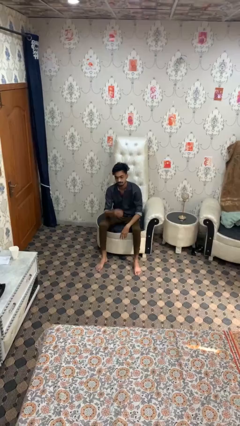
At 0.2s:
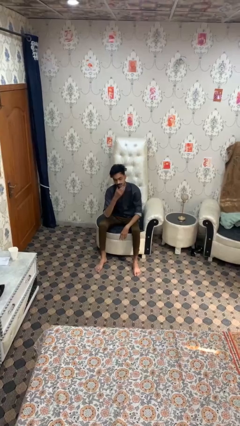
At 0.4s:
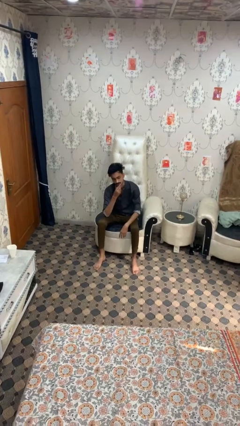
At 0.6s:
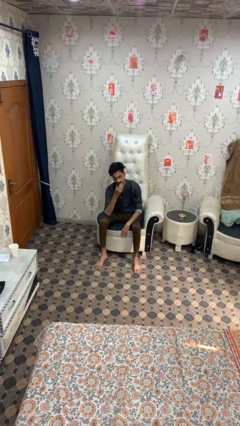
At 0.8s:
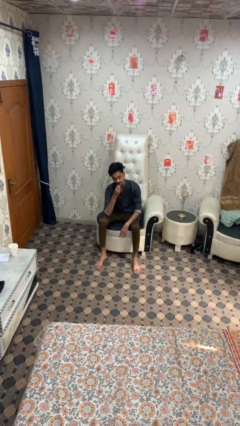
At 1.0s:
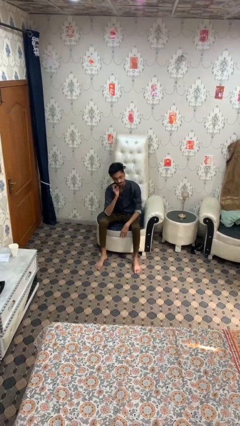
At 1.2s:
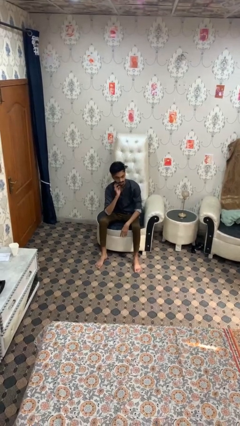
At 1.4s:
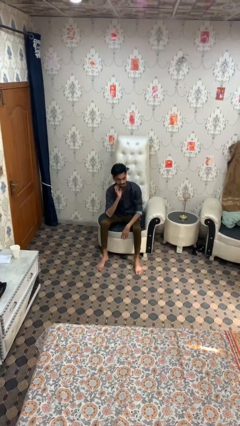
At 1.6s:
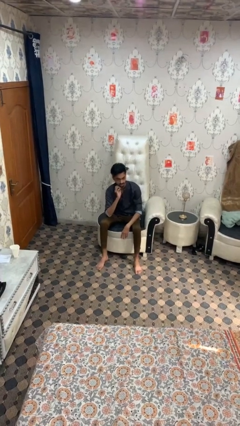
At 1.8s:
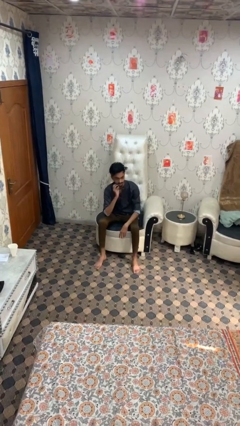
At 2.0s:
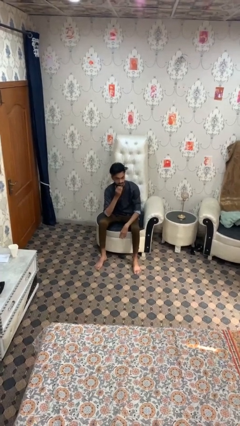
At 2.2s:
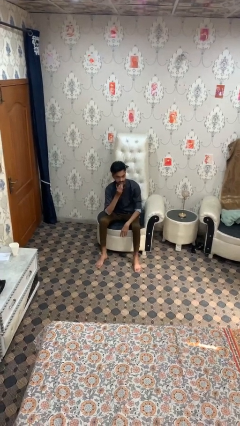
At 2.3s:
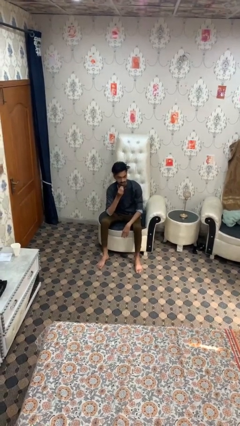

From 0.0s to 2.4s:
person strokes chin

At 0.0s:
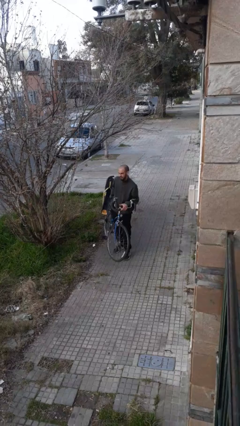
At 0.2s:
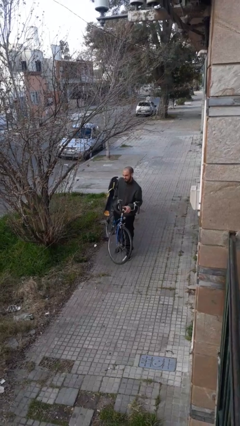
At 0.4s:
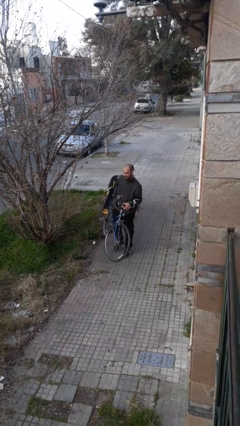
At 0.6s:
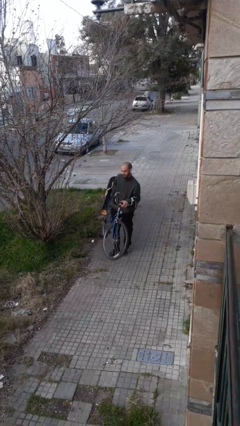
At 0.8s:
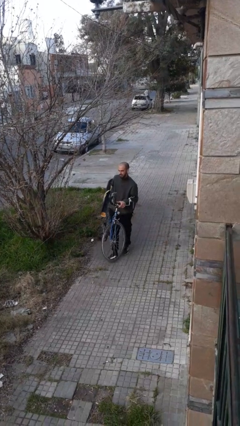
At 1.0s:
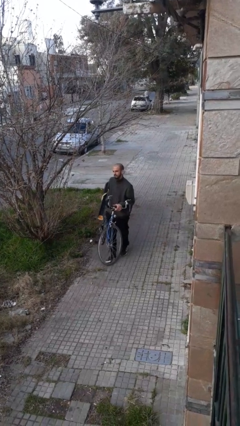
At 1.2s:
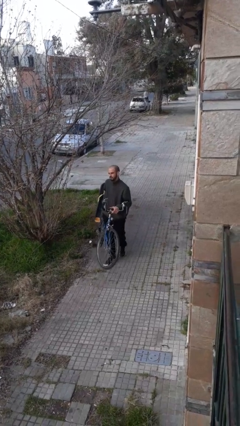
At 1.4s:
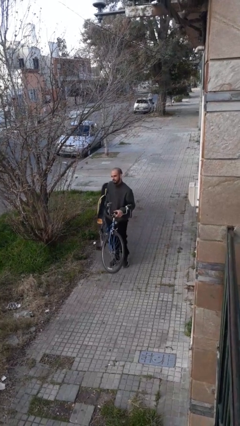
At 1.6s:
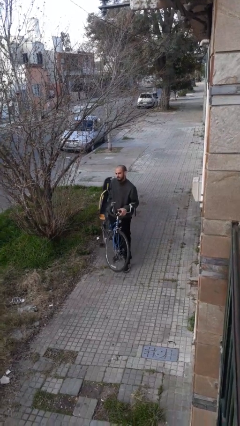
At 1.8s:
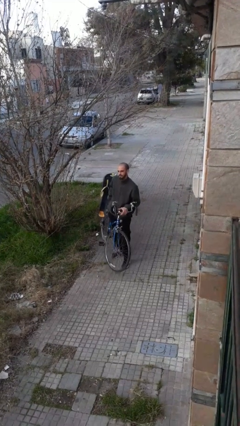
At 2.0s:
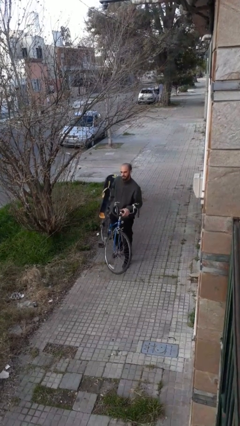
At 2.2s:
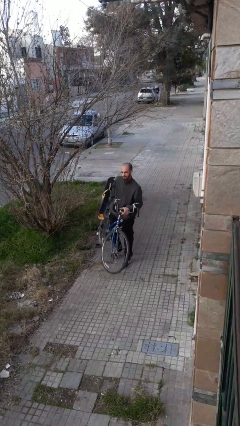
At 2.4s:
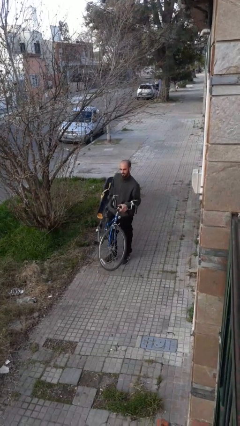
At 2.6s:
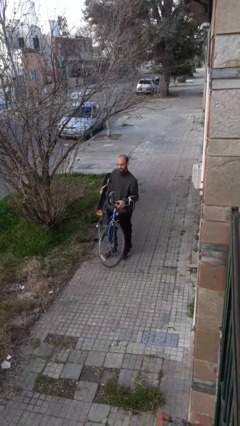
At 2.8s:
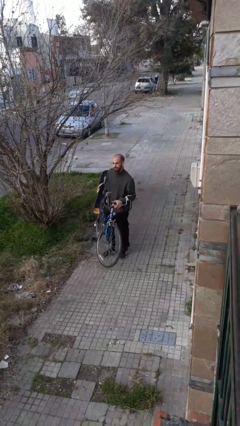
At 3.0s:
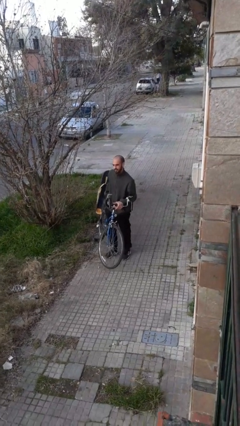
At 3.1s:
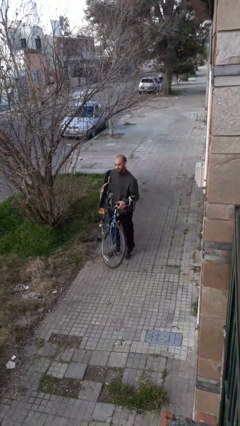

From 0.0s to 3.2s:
person carries bicycle

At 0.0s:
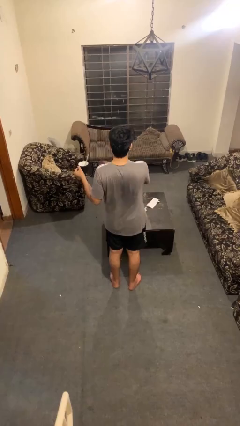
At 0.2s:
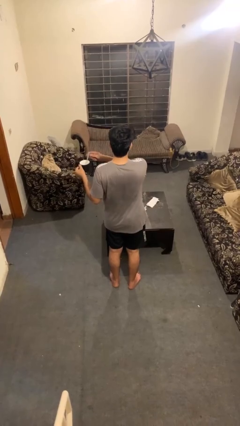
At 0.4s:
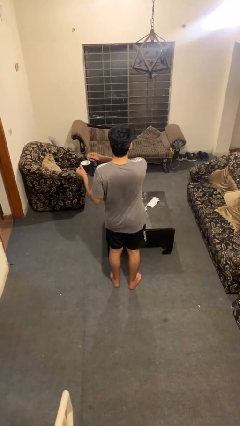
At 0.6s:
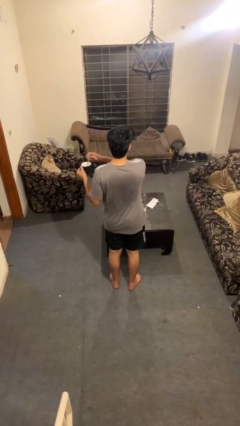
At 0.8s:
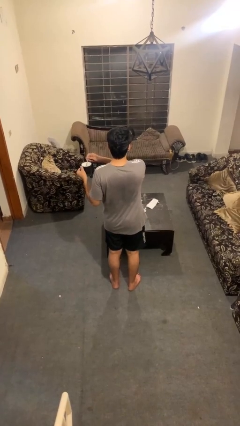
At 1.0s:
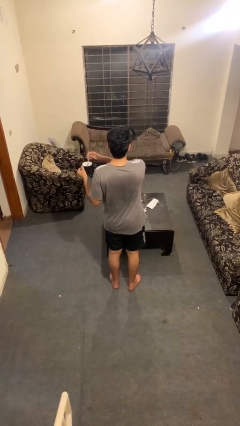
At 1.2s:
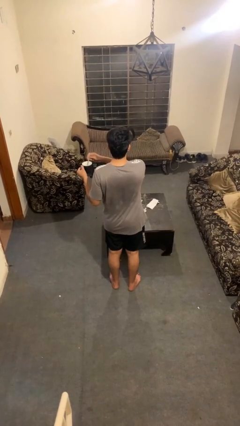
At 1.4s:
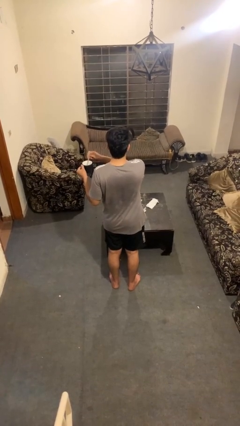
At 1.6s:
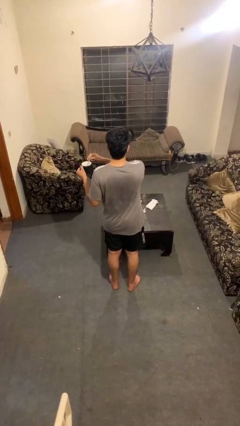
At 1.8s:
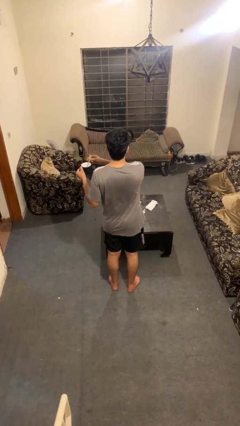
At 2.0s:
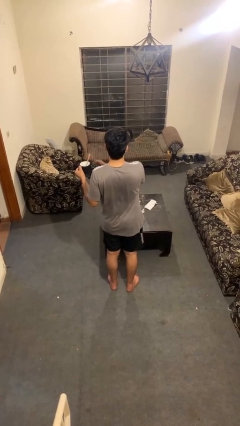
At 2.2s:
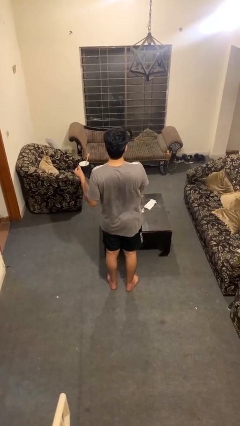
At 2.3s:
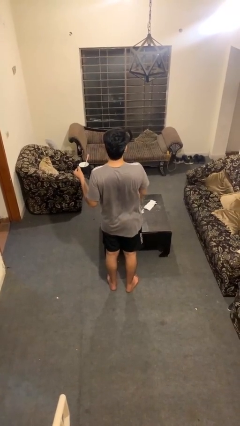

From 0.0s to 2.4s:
person stirs mug

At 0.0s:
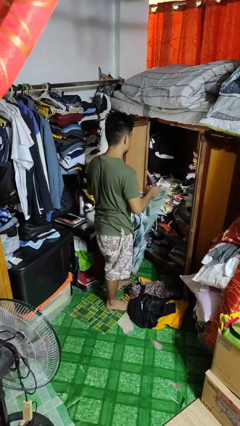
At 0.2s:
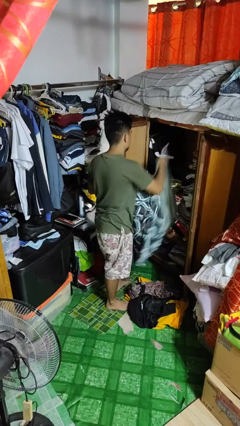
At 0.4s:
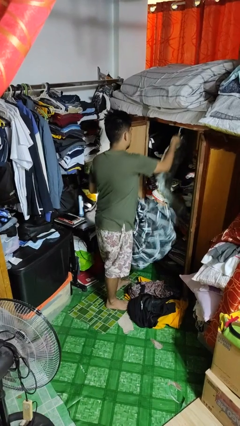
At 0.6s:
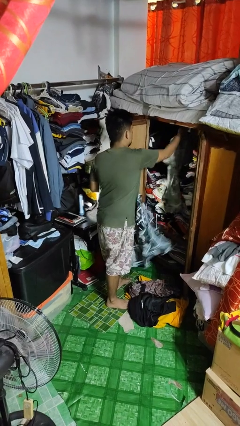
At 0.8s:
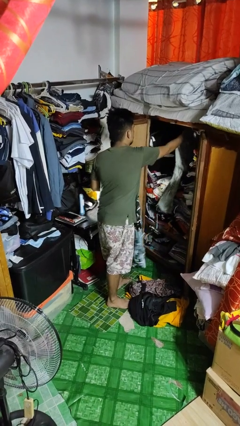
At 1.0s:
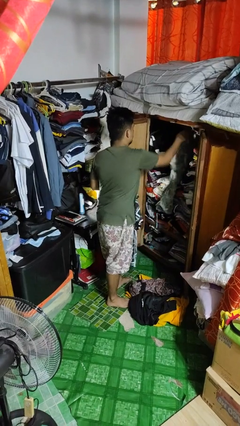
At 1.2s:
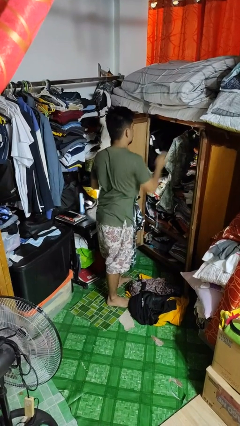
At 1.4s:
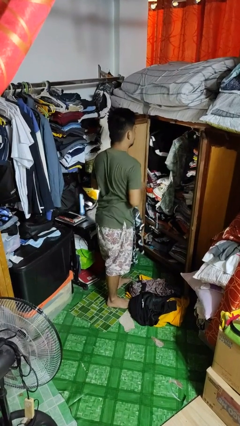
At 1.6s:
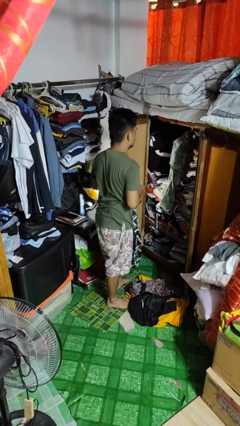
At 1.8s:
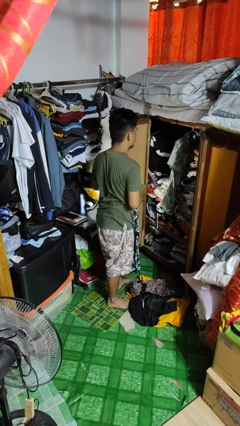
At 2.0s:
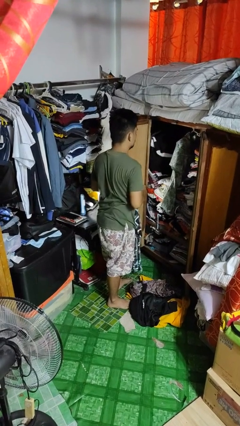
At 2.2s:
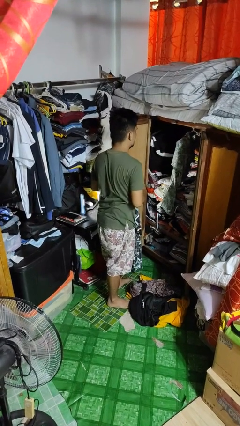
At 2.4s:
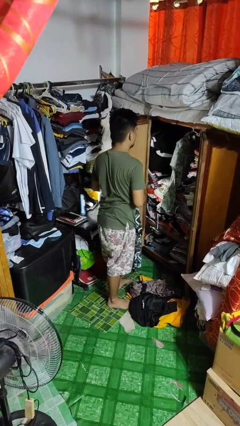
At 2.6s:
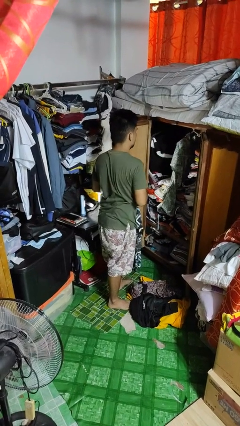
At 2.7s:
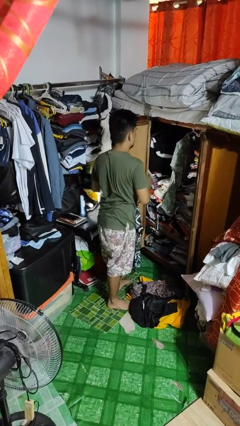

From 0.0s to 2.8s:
person puts clothes into closet

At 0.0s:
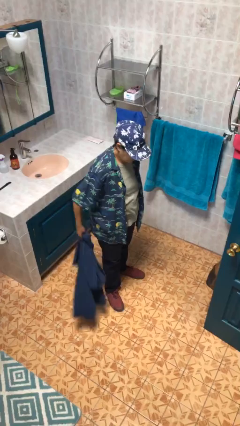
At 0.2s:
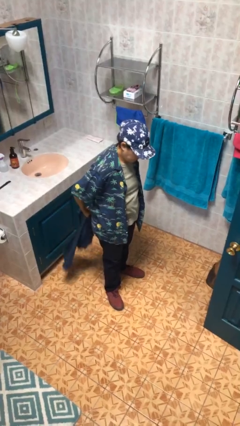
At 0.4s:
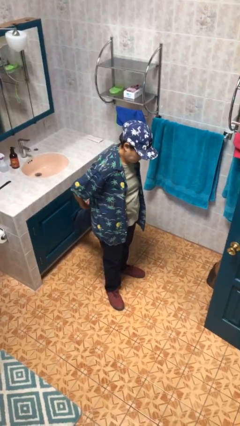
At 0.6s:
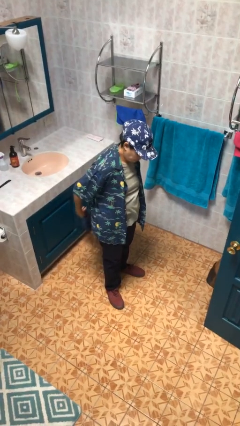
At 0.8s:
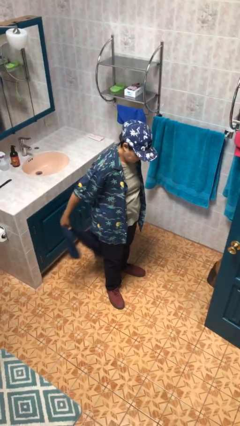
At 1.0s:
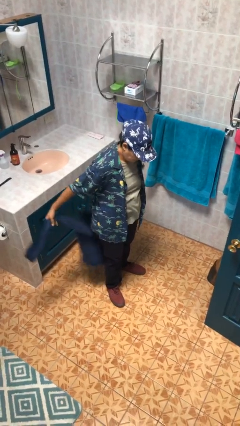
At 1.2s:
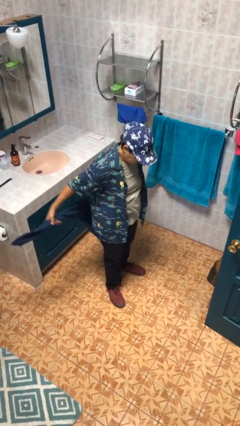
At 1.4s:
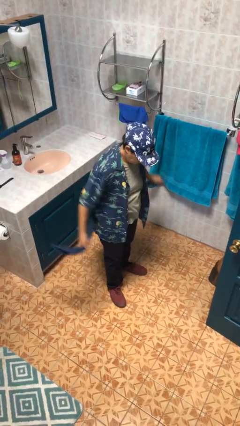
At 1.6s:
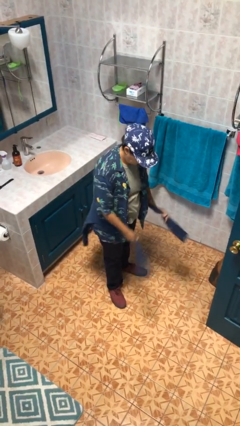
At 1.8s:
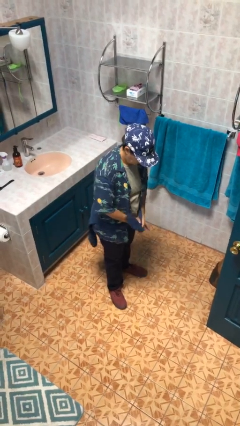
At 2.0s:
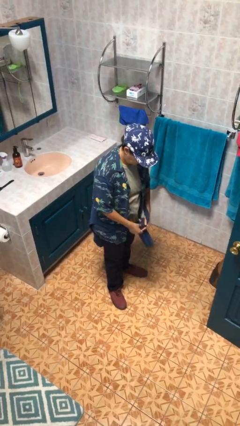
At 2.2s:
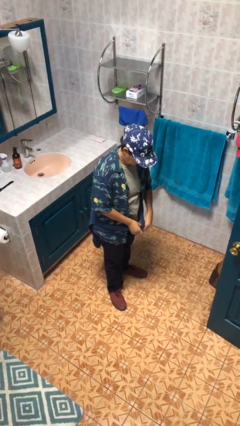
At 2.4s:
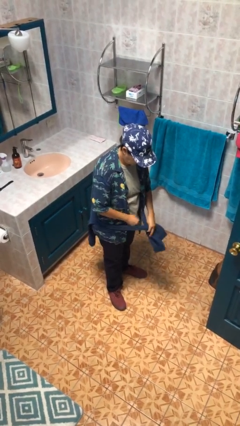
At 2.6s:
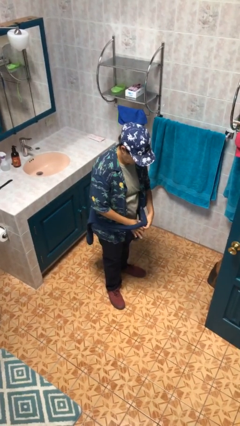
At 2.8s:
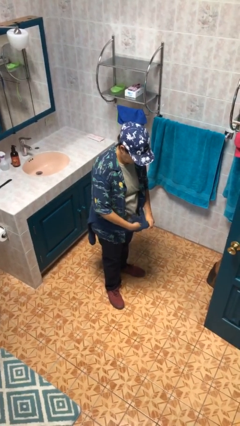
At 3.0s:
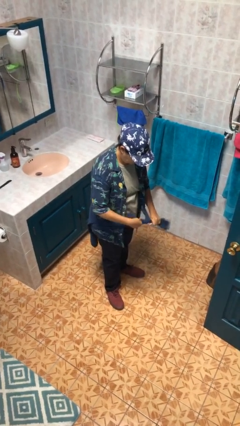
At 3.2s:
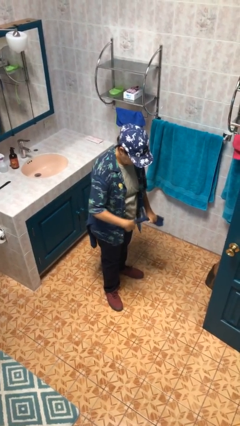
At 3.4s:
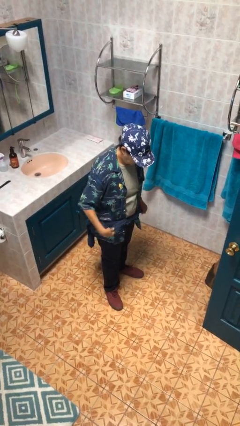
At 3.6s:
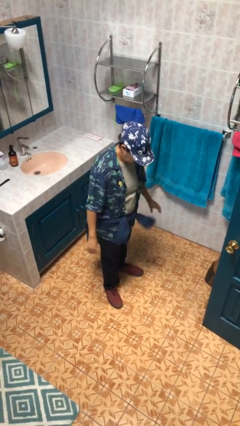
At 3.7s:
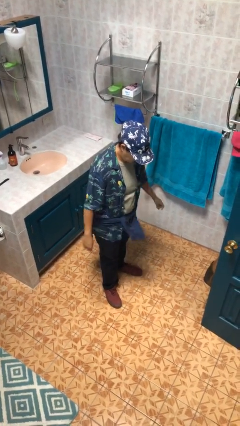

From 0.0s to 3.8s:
person ties jacket around waist

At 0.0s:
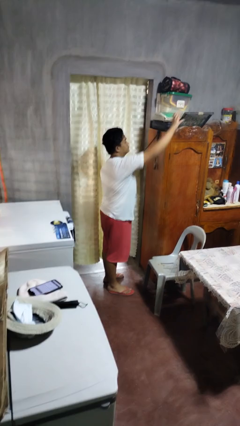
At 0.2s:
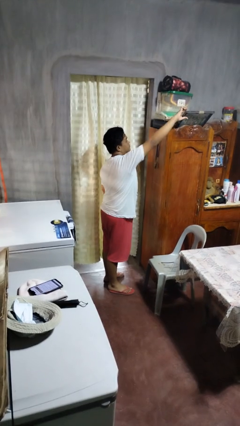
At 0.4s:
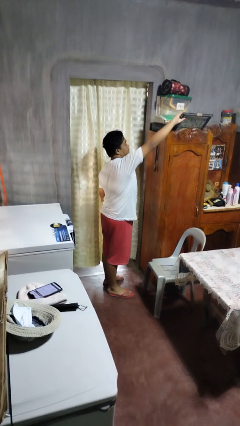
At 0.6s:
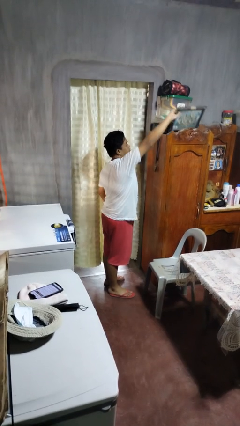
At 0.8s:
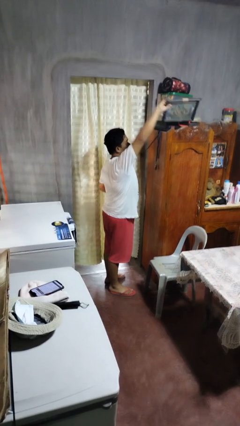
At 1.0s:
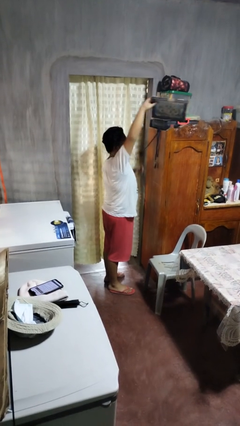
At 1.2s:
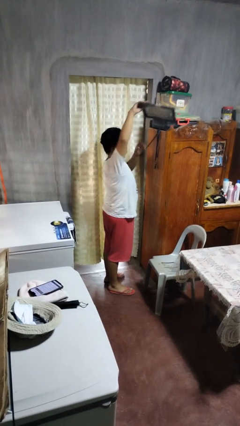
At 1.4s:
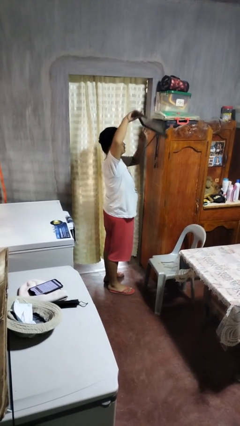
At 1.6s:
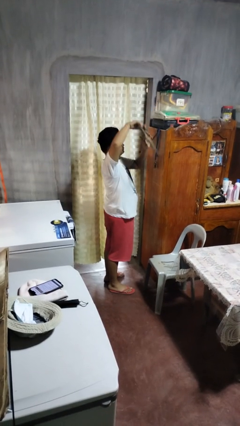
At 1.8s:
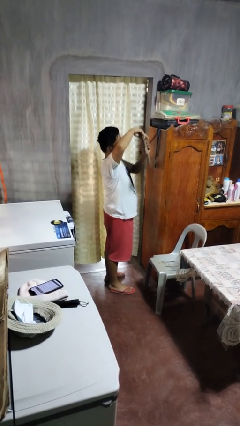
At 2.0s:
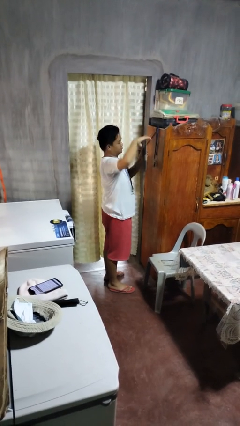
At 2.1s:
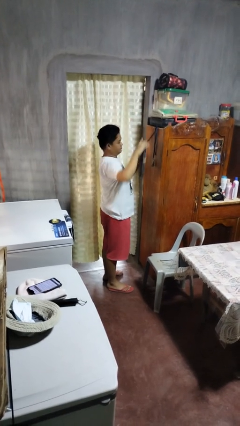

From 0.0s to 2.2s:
person picks up object from shelf

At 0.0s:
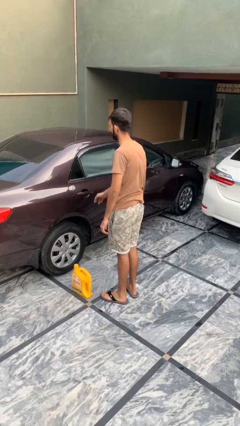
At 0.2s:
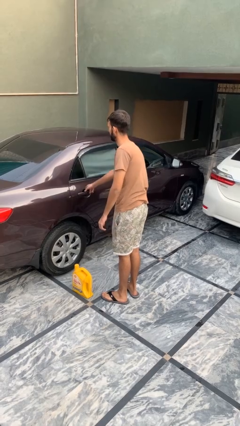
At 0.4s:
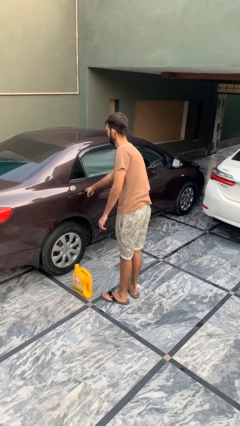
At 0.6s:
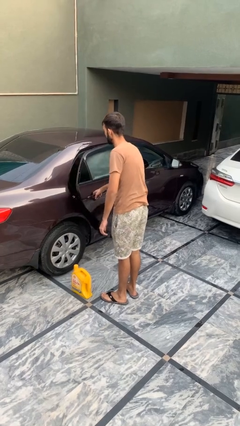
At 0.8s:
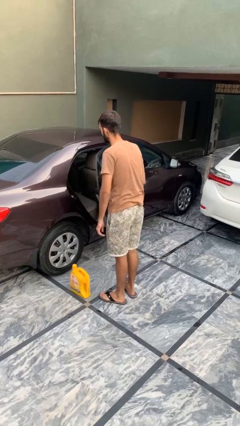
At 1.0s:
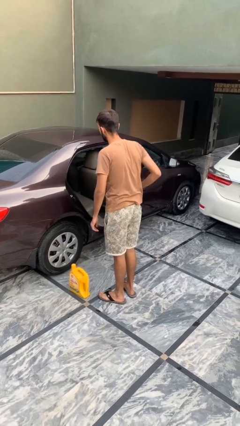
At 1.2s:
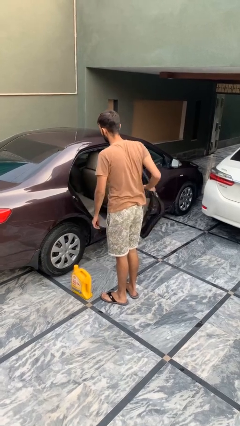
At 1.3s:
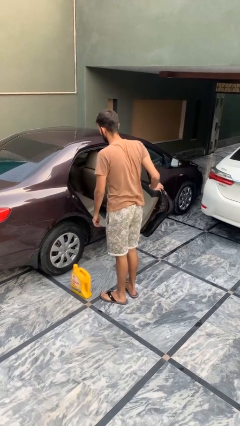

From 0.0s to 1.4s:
person opens car door
